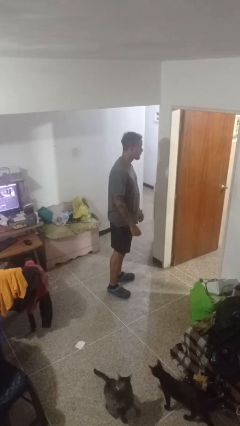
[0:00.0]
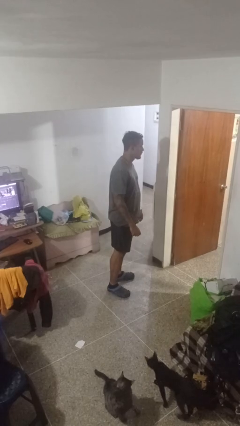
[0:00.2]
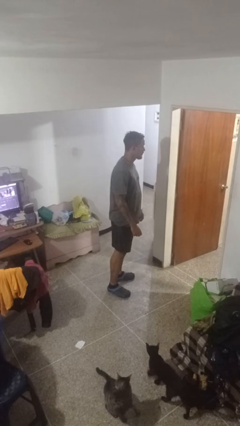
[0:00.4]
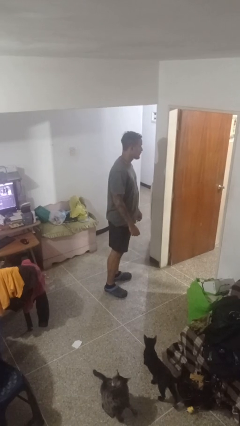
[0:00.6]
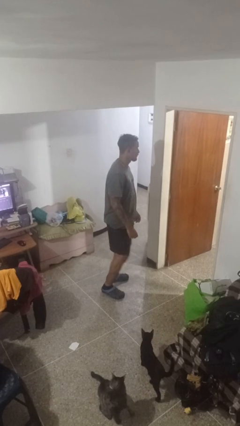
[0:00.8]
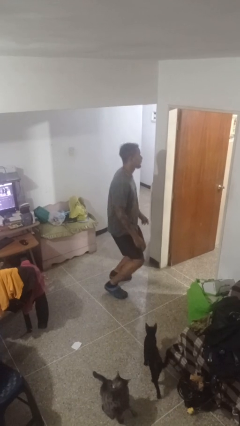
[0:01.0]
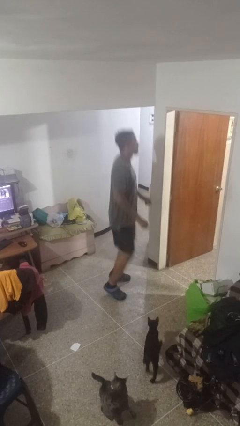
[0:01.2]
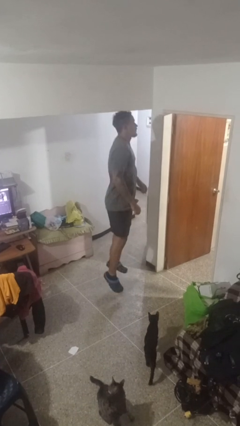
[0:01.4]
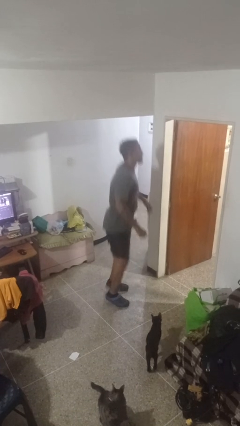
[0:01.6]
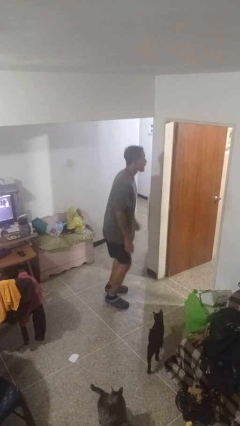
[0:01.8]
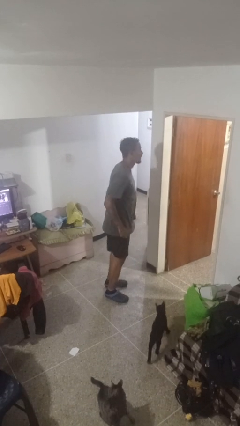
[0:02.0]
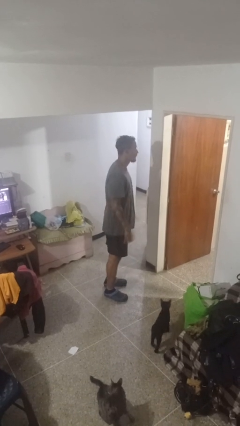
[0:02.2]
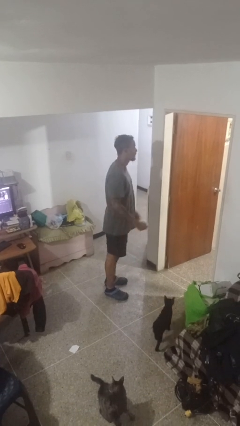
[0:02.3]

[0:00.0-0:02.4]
person jumps

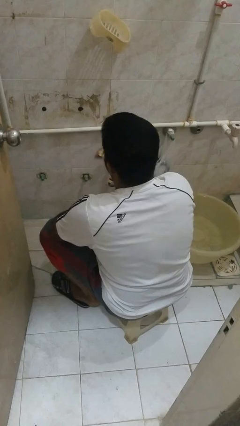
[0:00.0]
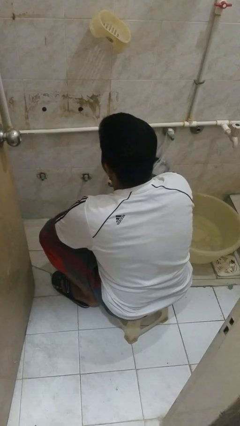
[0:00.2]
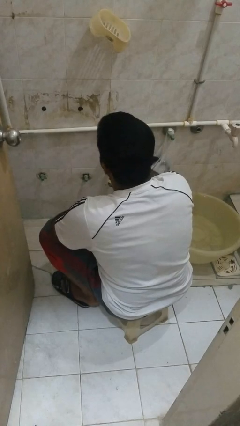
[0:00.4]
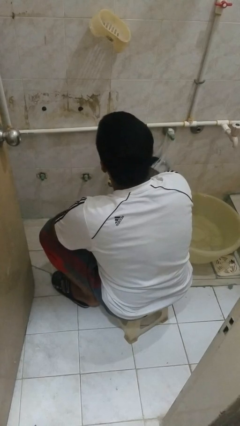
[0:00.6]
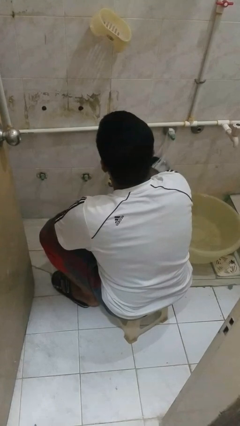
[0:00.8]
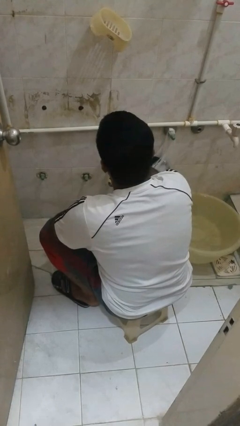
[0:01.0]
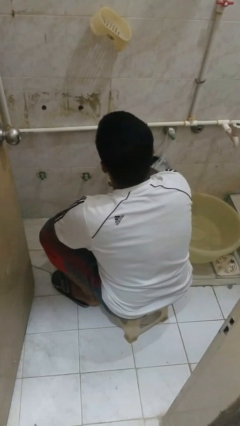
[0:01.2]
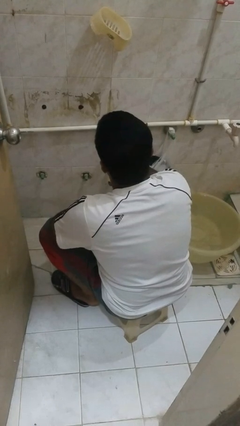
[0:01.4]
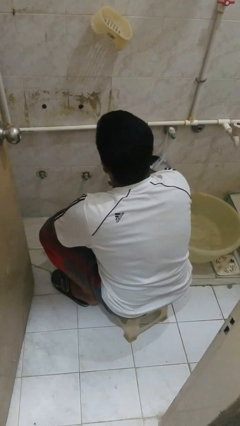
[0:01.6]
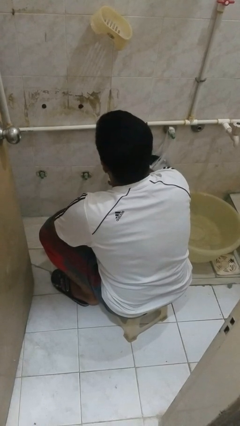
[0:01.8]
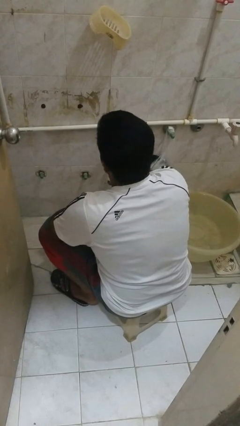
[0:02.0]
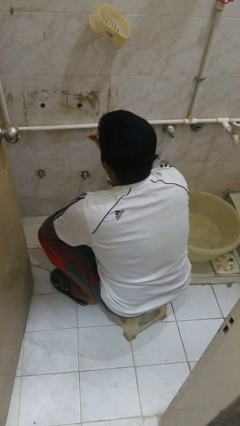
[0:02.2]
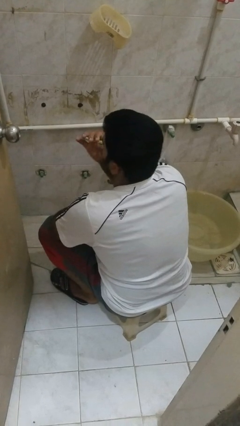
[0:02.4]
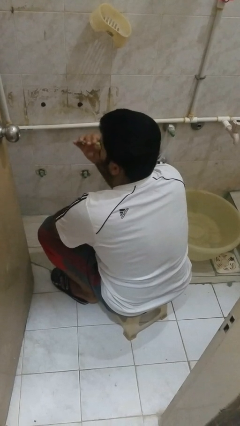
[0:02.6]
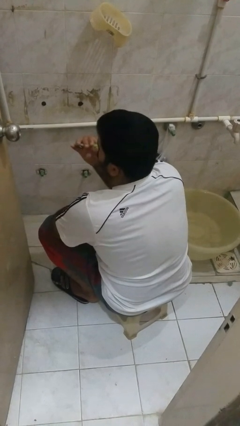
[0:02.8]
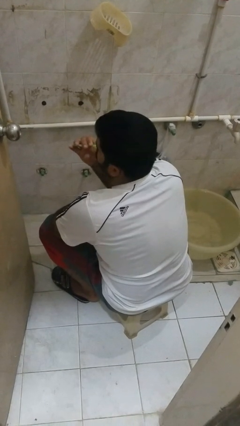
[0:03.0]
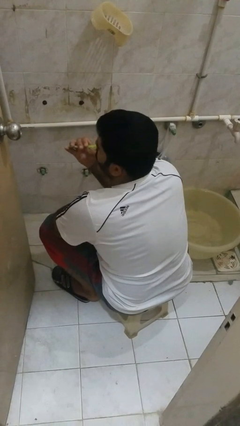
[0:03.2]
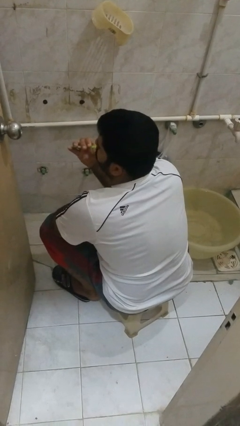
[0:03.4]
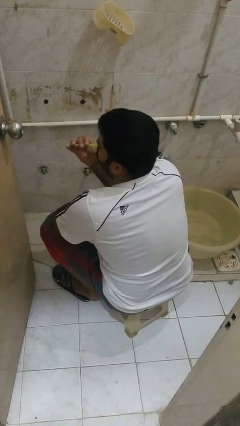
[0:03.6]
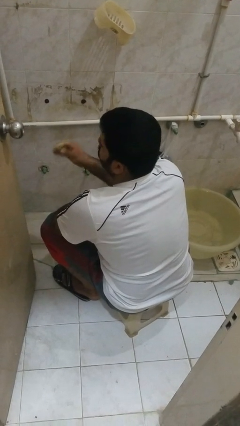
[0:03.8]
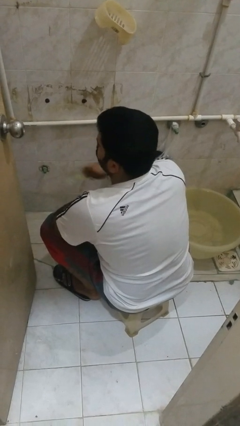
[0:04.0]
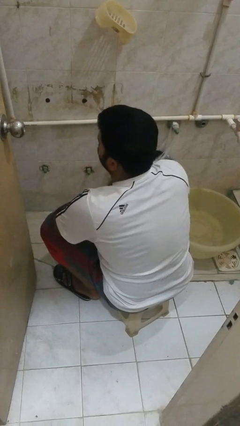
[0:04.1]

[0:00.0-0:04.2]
person brushes teeth

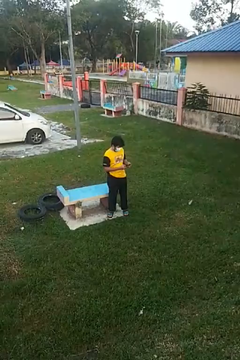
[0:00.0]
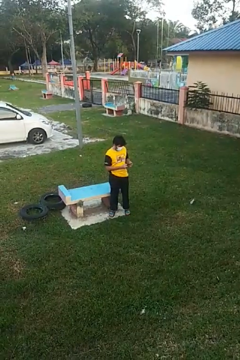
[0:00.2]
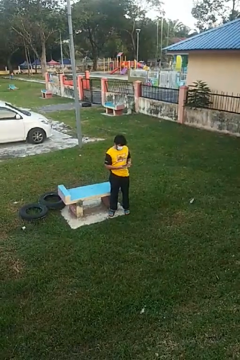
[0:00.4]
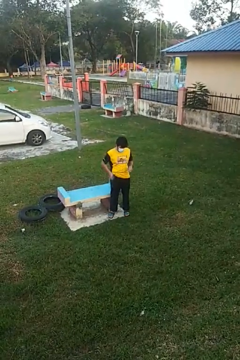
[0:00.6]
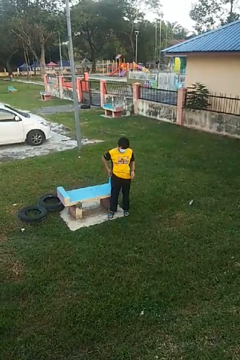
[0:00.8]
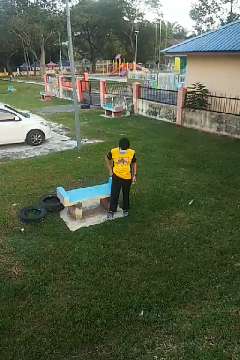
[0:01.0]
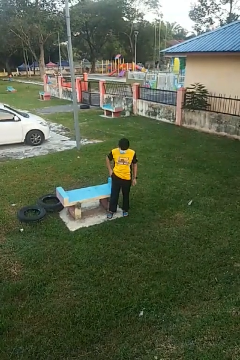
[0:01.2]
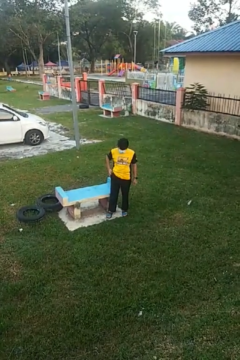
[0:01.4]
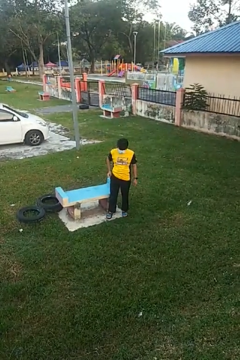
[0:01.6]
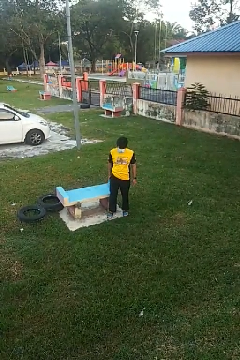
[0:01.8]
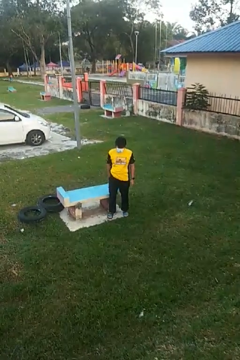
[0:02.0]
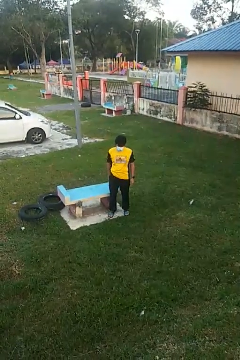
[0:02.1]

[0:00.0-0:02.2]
person puts phone into pocket

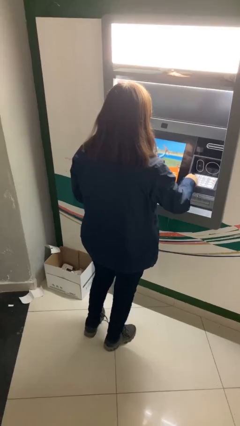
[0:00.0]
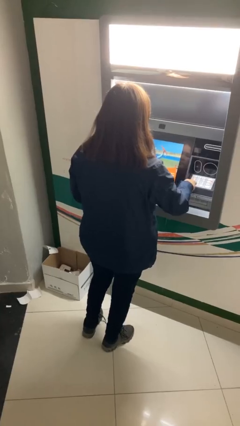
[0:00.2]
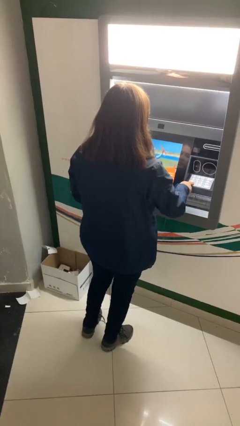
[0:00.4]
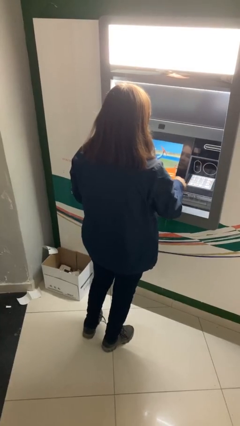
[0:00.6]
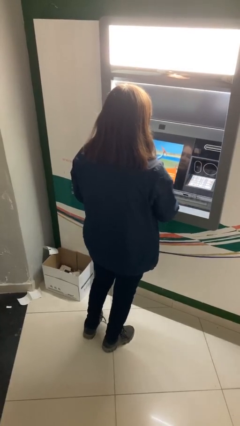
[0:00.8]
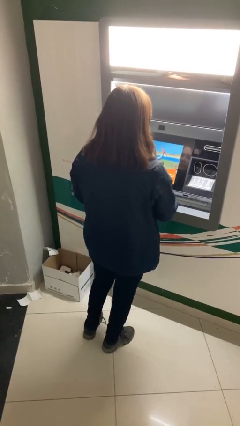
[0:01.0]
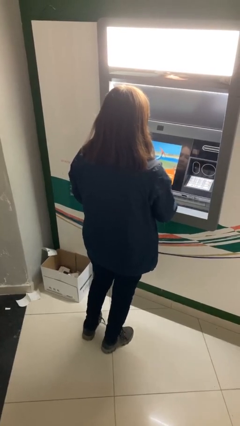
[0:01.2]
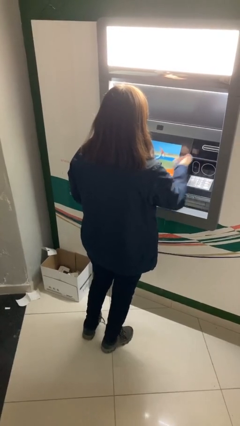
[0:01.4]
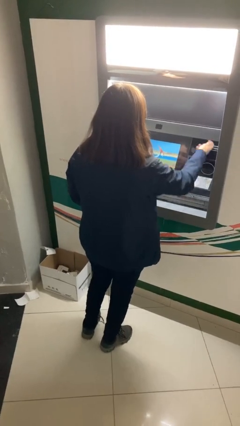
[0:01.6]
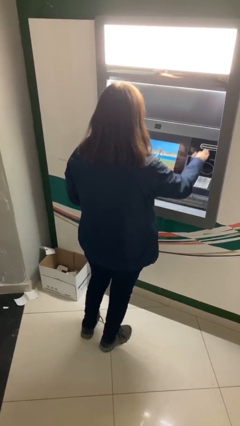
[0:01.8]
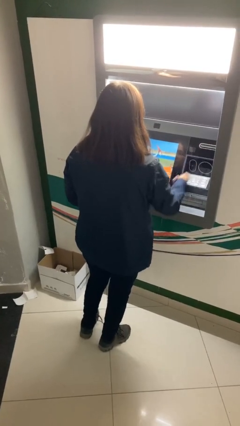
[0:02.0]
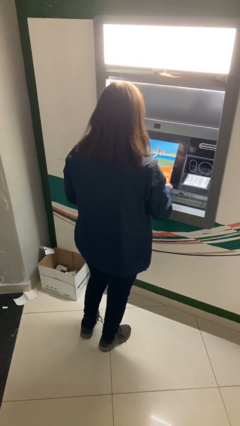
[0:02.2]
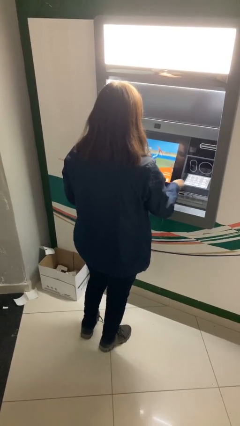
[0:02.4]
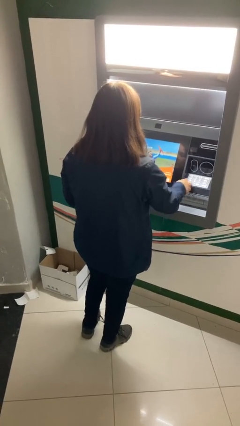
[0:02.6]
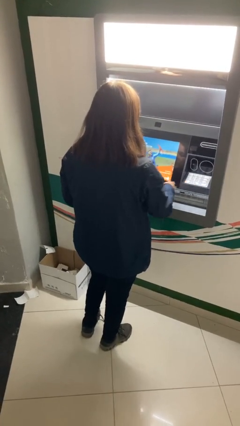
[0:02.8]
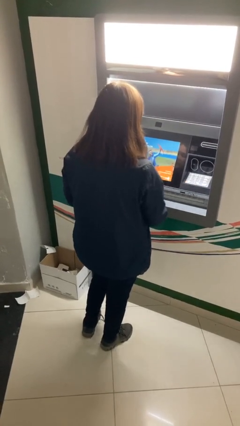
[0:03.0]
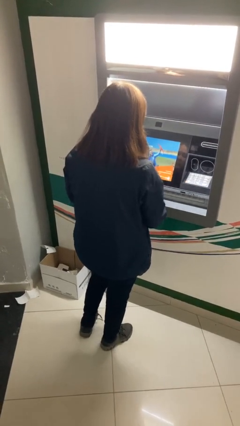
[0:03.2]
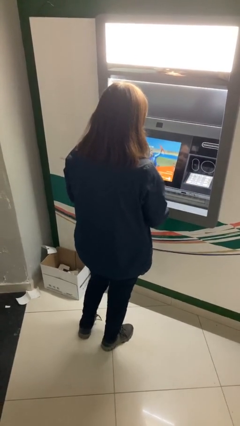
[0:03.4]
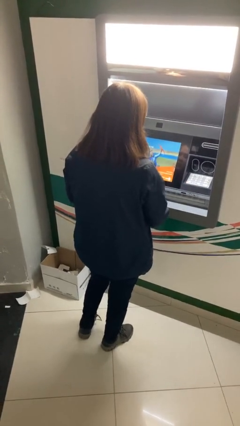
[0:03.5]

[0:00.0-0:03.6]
person purchases from machine

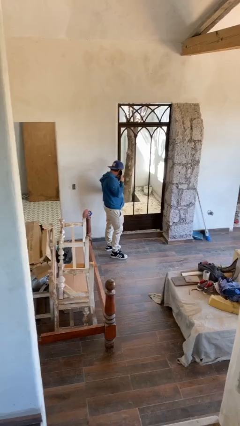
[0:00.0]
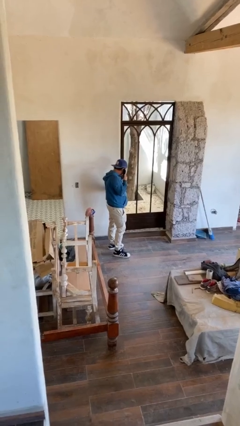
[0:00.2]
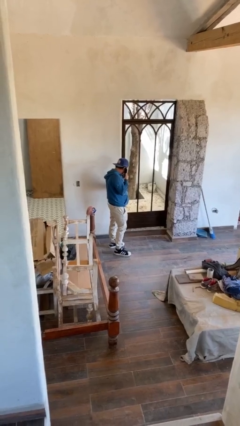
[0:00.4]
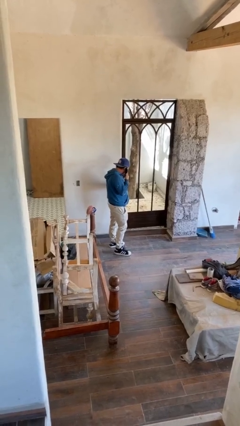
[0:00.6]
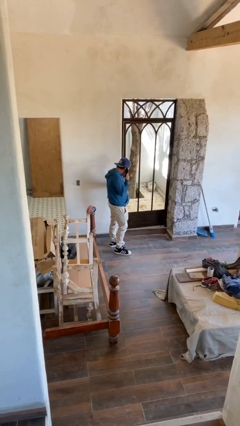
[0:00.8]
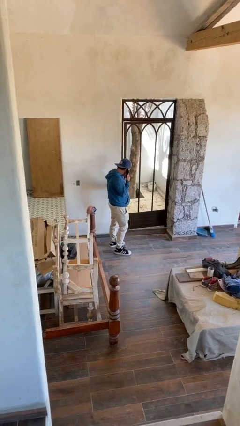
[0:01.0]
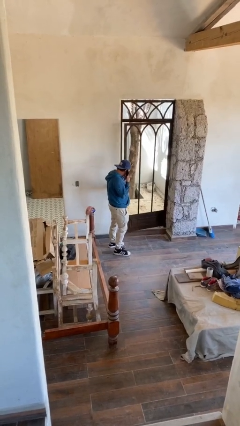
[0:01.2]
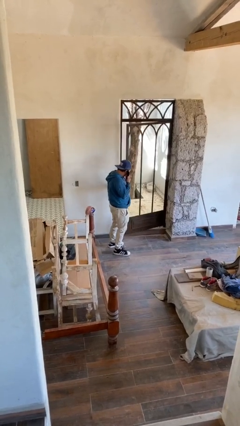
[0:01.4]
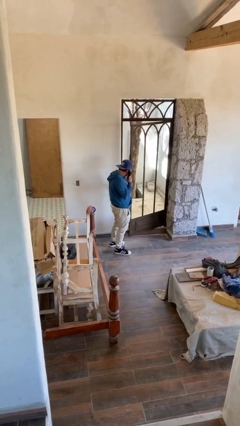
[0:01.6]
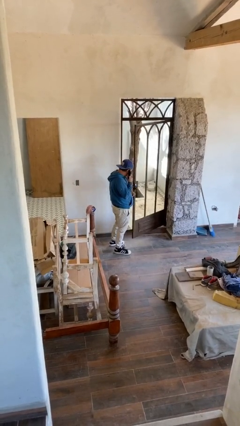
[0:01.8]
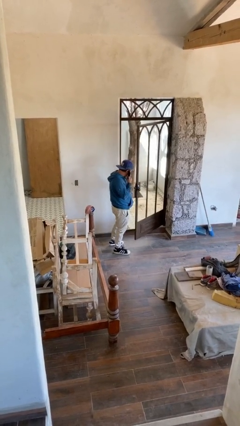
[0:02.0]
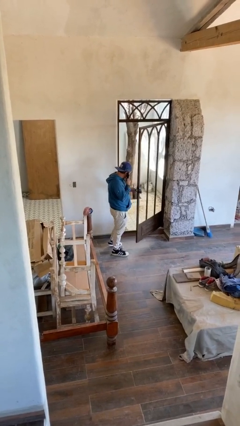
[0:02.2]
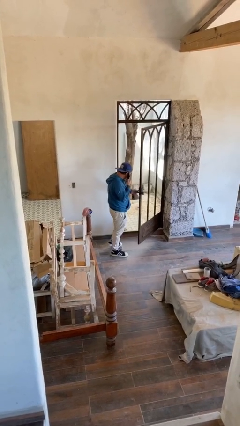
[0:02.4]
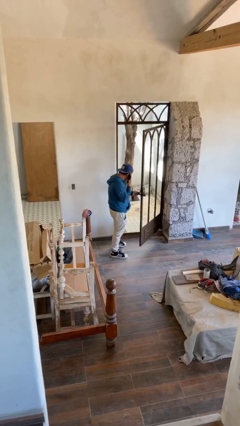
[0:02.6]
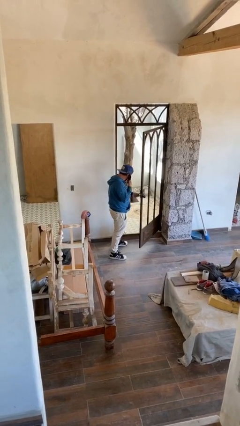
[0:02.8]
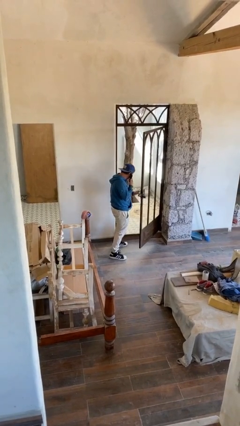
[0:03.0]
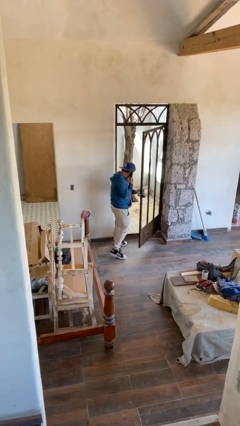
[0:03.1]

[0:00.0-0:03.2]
person opens facility door

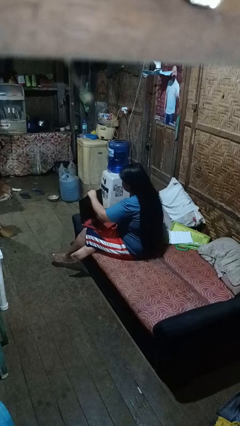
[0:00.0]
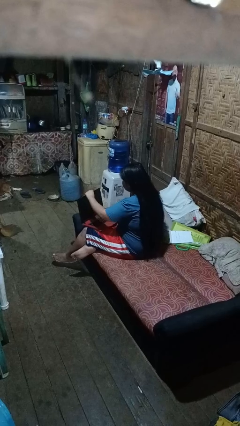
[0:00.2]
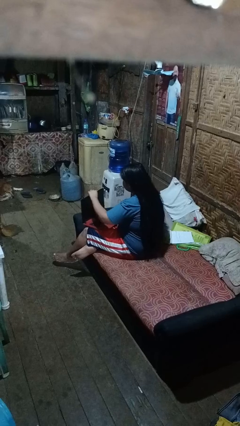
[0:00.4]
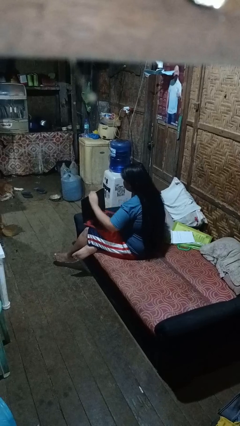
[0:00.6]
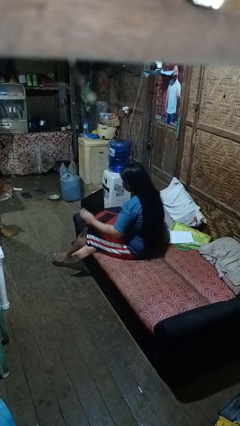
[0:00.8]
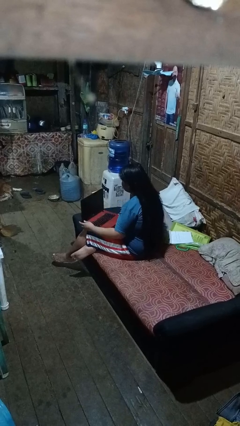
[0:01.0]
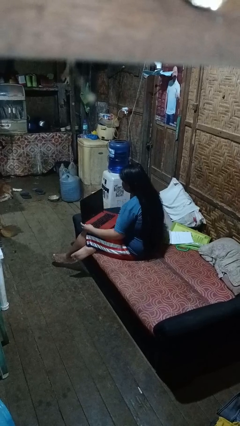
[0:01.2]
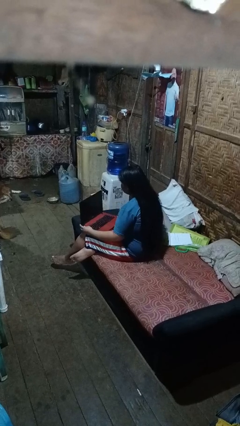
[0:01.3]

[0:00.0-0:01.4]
person opens laptop

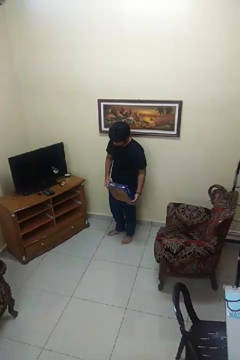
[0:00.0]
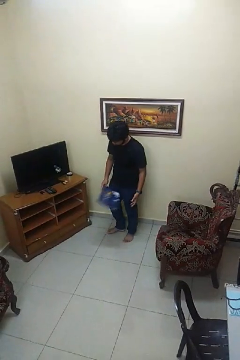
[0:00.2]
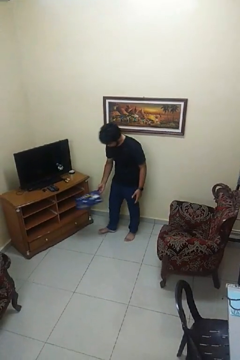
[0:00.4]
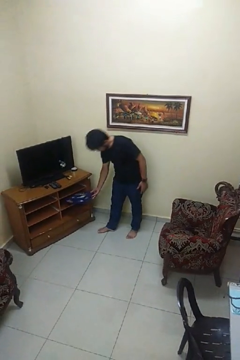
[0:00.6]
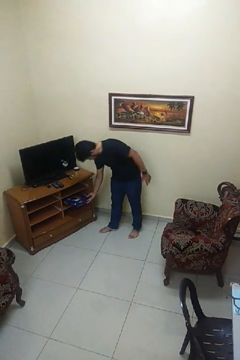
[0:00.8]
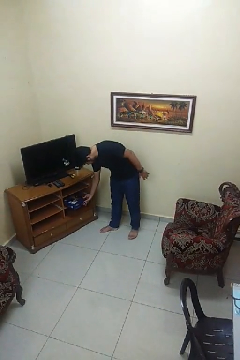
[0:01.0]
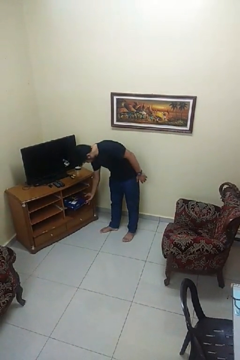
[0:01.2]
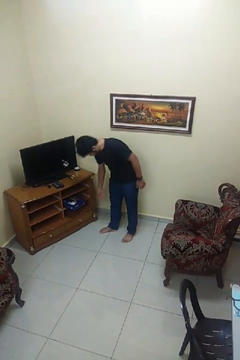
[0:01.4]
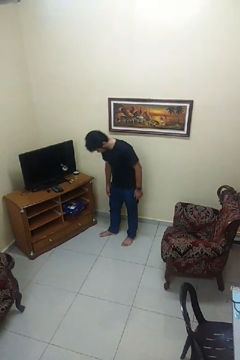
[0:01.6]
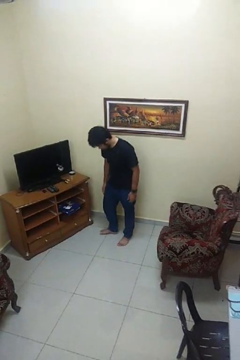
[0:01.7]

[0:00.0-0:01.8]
person puts down object into cabinet
